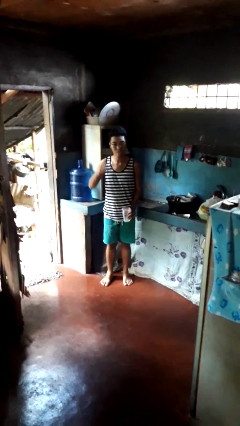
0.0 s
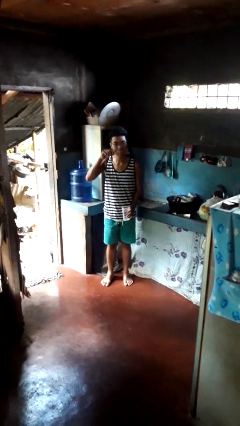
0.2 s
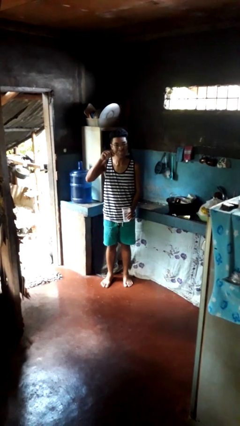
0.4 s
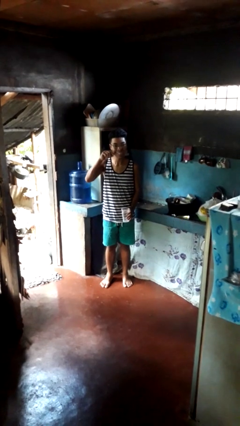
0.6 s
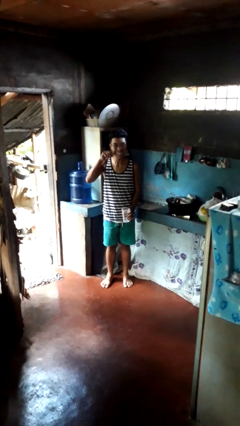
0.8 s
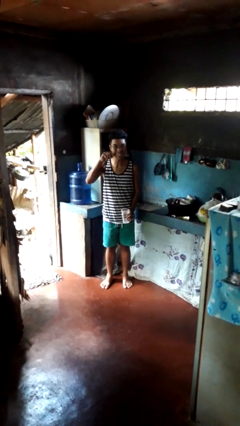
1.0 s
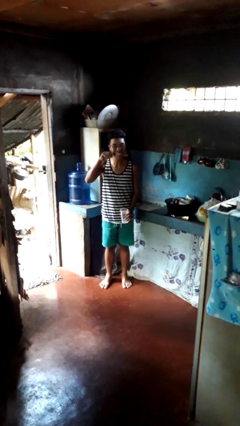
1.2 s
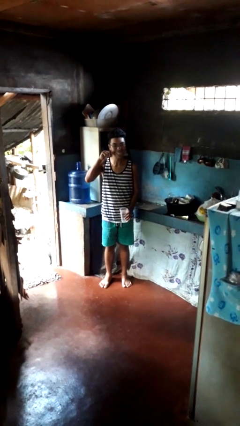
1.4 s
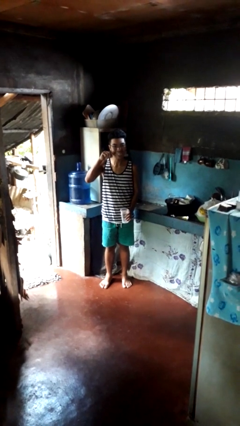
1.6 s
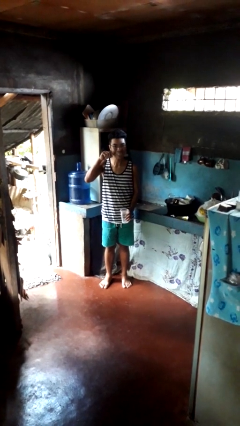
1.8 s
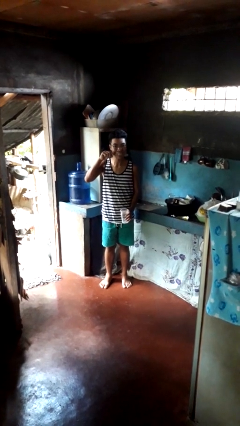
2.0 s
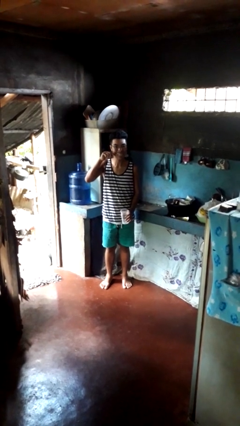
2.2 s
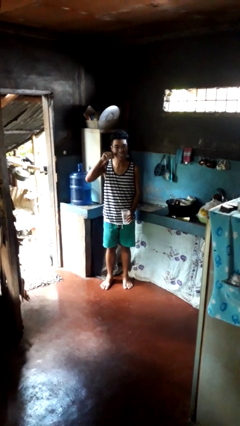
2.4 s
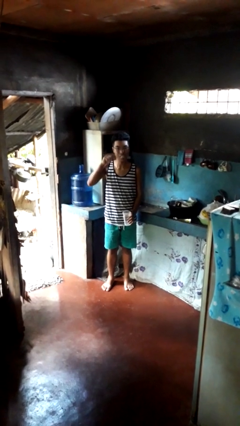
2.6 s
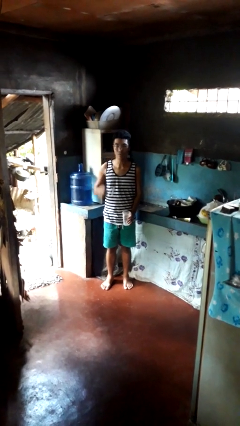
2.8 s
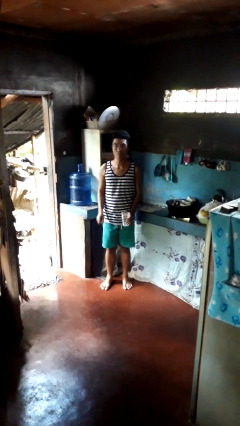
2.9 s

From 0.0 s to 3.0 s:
person brushes teeth

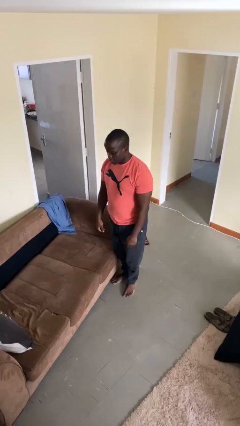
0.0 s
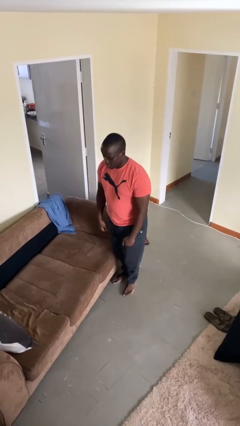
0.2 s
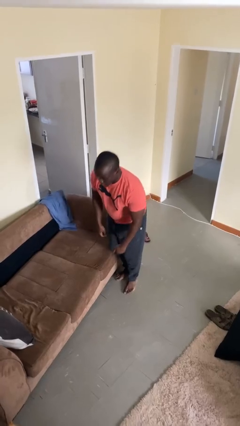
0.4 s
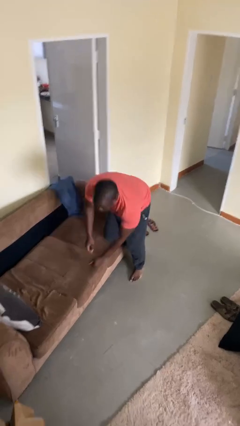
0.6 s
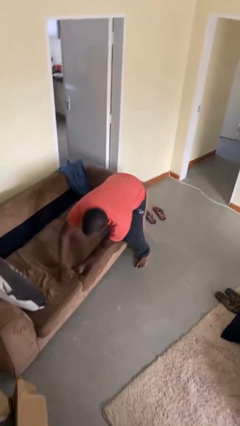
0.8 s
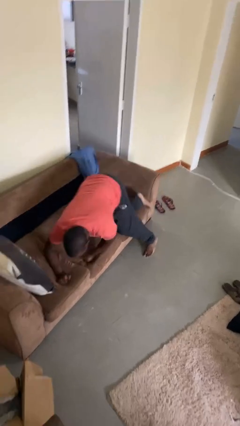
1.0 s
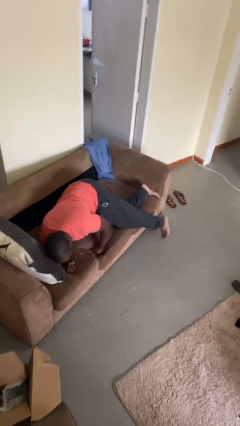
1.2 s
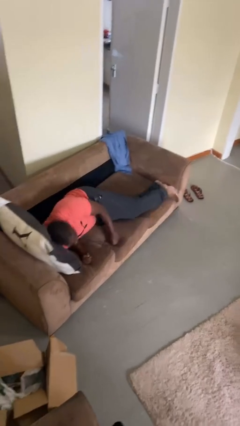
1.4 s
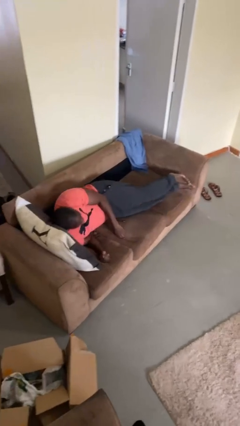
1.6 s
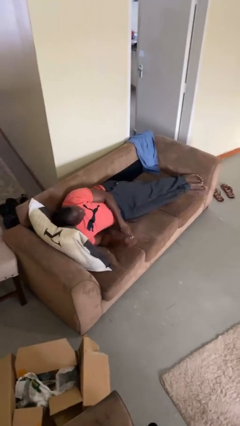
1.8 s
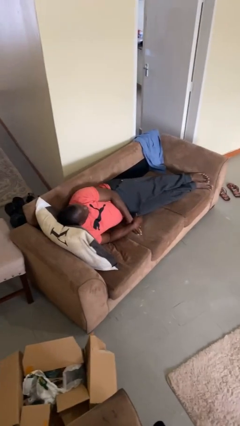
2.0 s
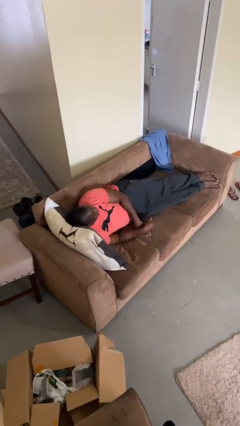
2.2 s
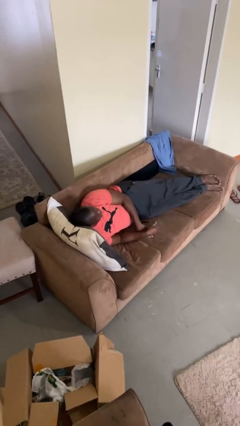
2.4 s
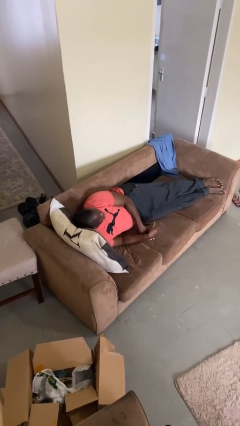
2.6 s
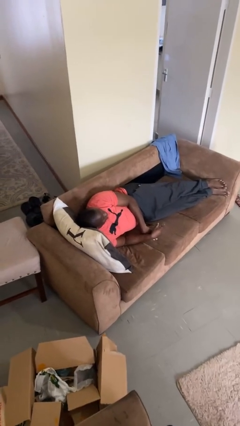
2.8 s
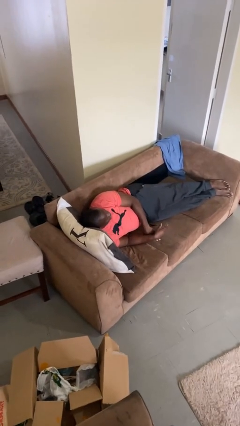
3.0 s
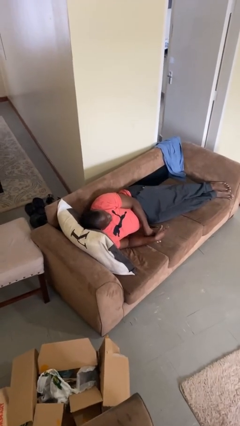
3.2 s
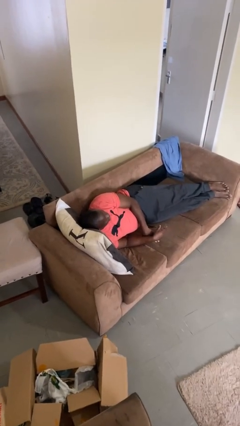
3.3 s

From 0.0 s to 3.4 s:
person lies down on couch

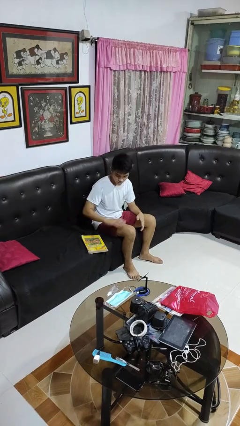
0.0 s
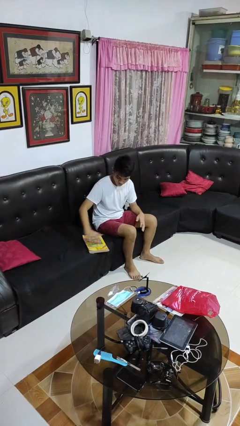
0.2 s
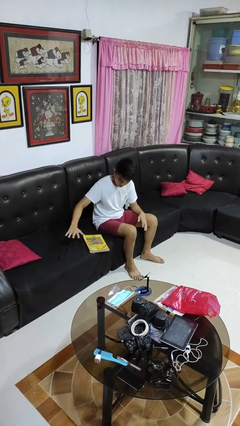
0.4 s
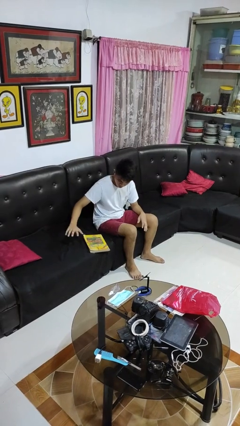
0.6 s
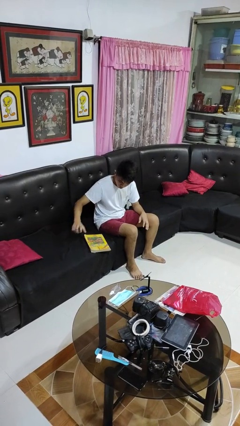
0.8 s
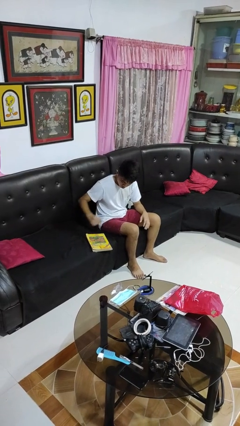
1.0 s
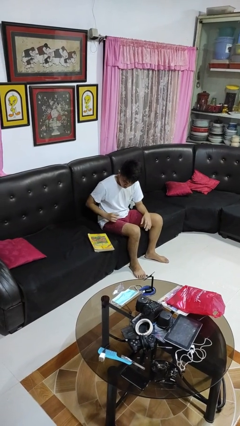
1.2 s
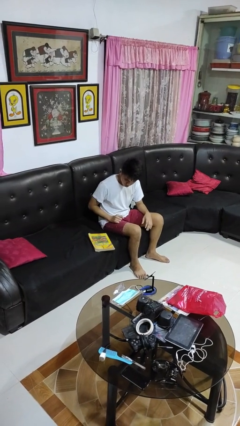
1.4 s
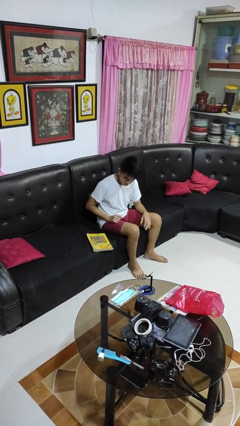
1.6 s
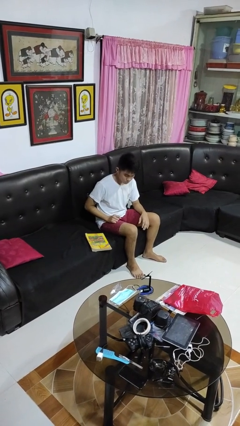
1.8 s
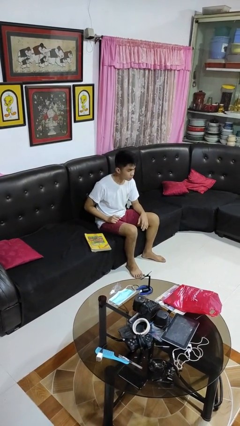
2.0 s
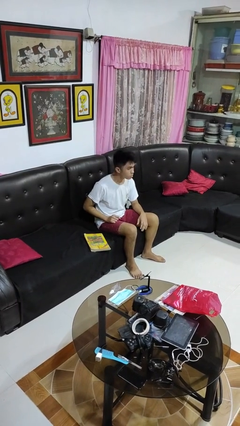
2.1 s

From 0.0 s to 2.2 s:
person waves hand over object

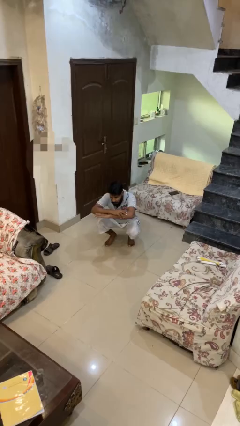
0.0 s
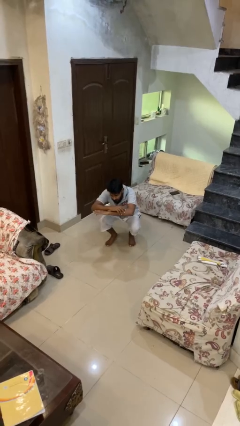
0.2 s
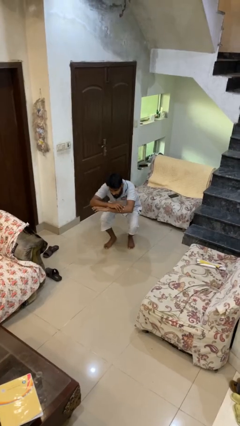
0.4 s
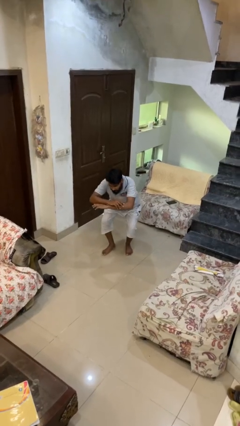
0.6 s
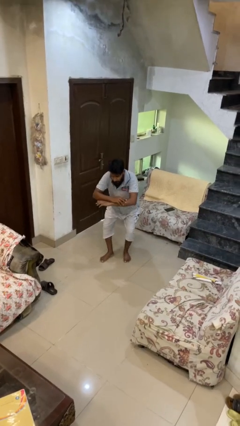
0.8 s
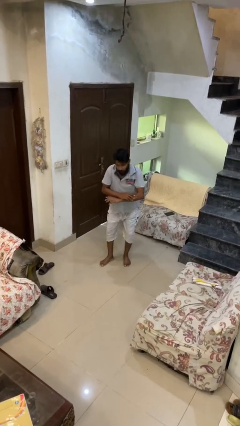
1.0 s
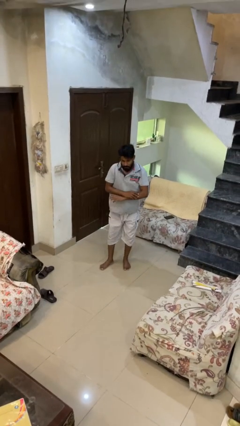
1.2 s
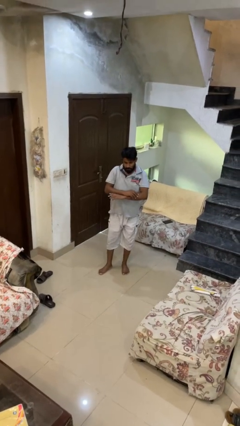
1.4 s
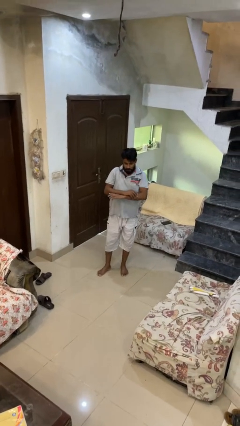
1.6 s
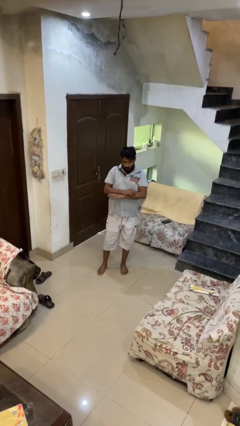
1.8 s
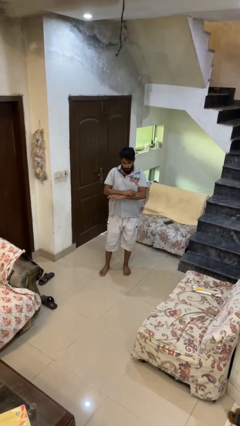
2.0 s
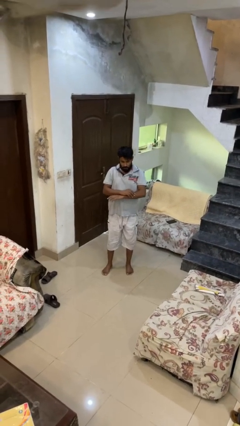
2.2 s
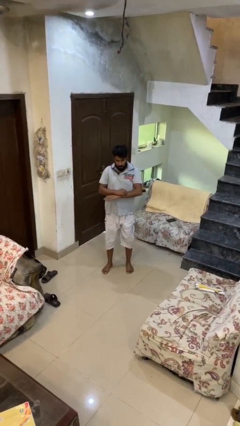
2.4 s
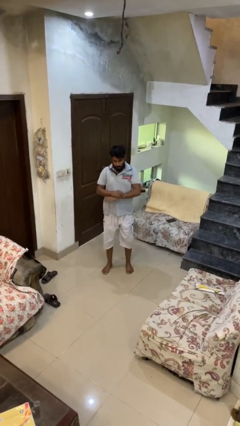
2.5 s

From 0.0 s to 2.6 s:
person stands up

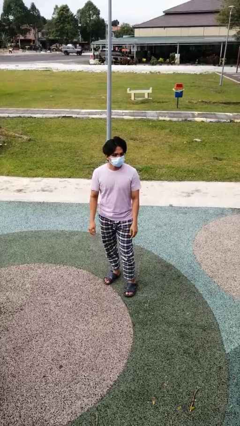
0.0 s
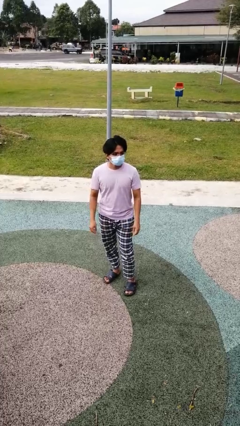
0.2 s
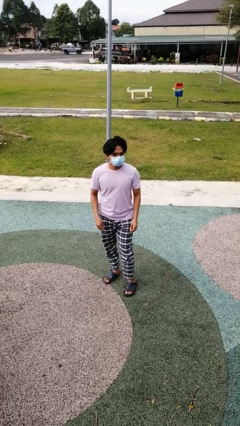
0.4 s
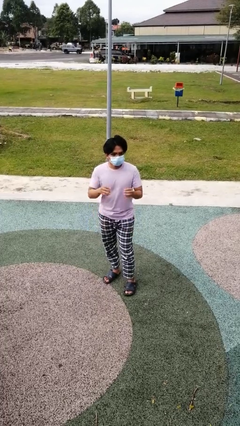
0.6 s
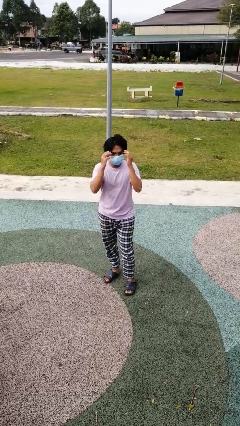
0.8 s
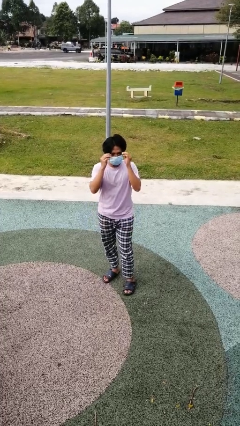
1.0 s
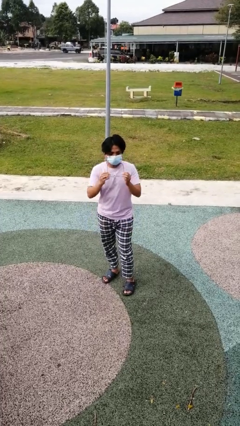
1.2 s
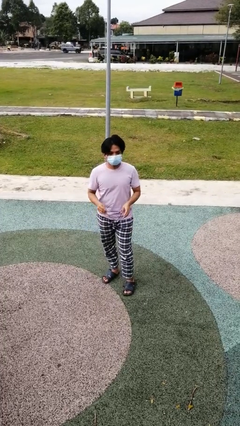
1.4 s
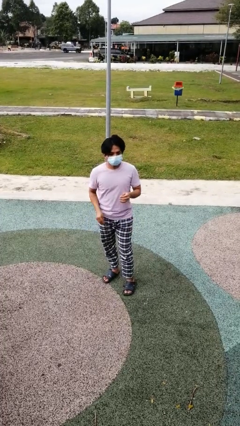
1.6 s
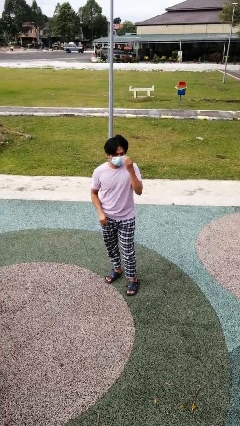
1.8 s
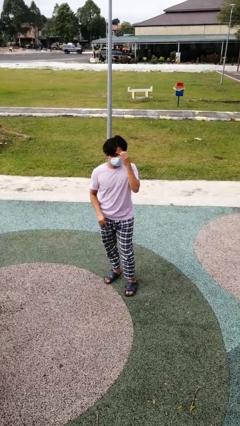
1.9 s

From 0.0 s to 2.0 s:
person takes off glasses

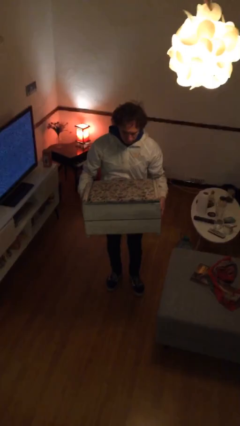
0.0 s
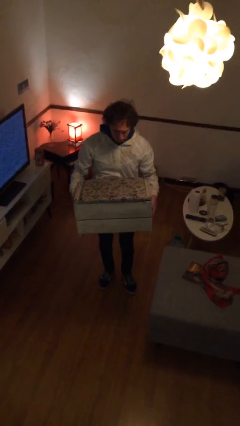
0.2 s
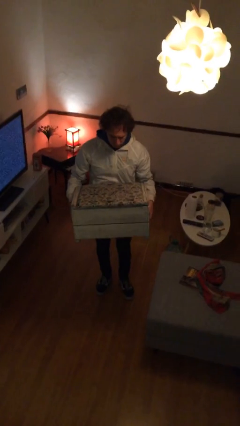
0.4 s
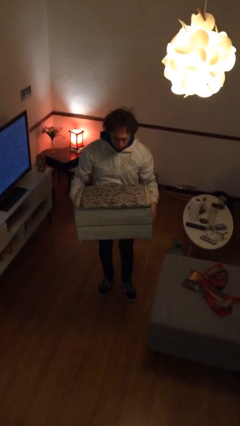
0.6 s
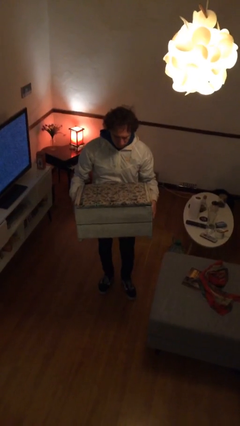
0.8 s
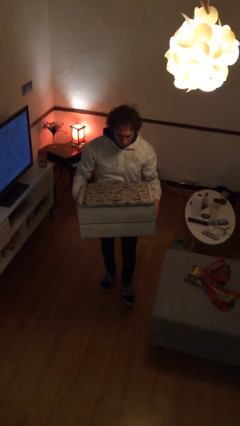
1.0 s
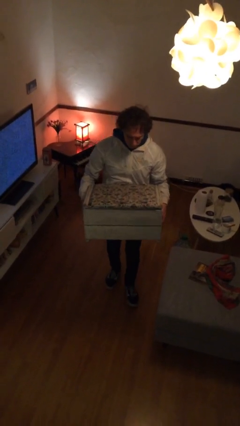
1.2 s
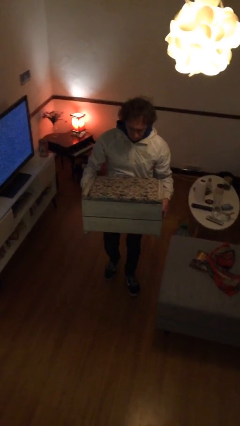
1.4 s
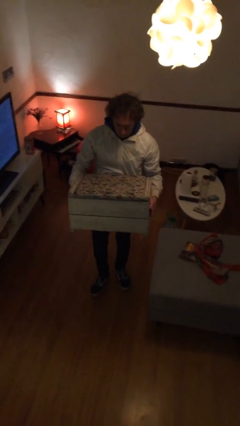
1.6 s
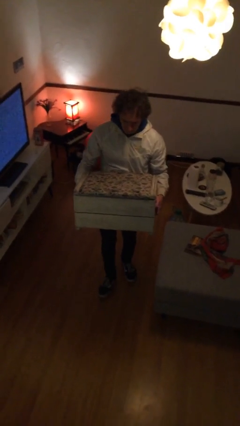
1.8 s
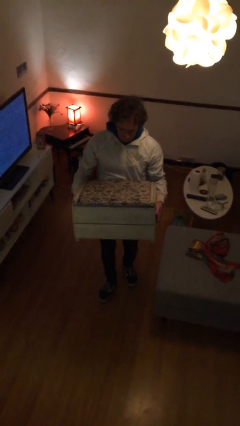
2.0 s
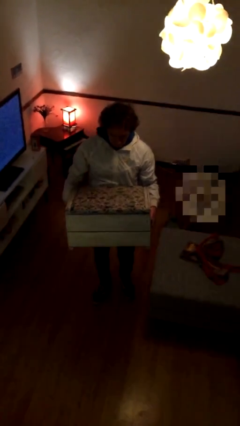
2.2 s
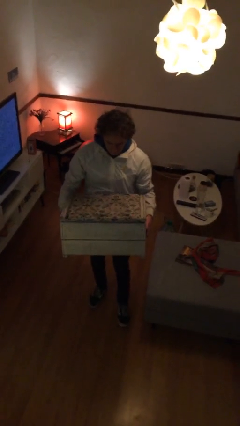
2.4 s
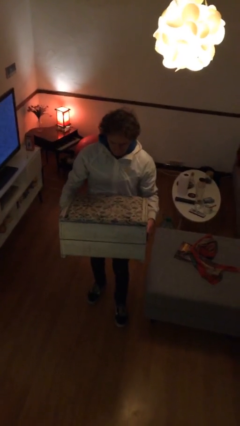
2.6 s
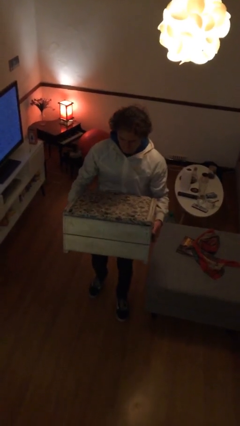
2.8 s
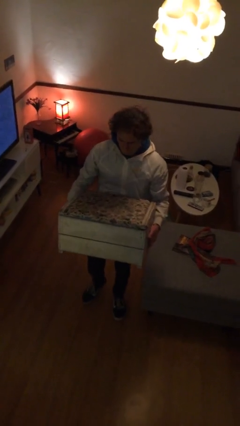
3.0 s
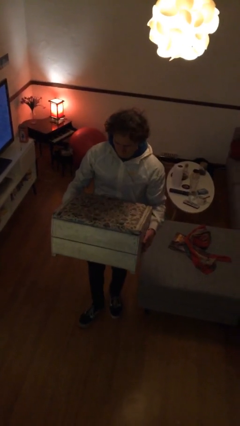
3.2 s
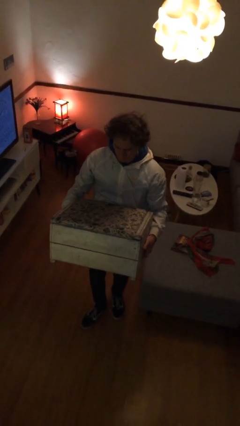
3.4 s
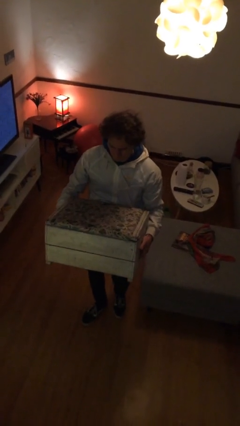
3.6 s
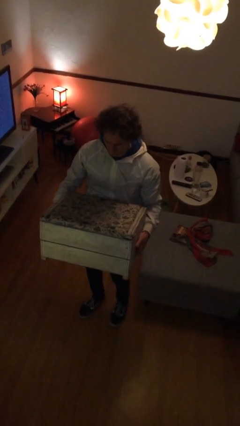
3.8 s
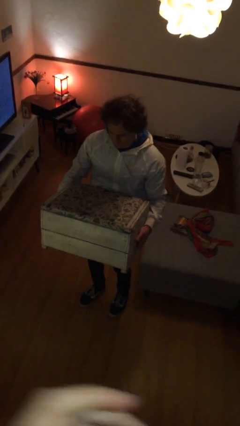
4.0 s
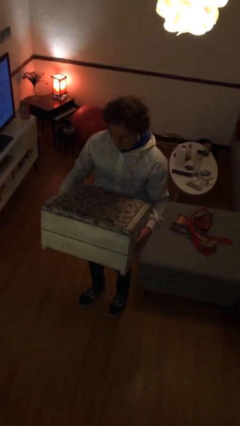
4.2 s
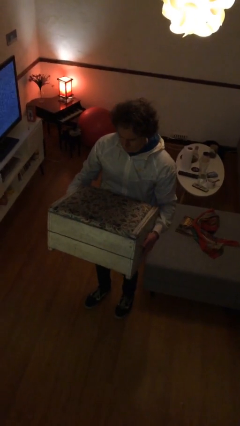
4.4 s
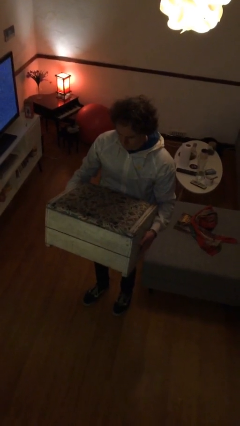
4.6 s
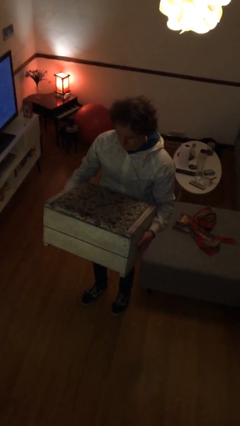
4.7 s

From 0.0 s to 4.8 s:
person carries furniture
